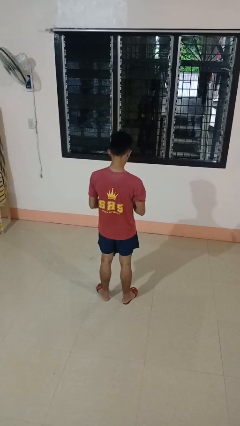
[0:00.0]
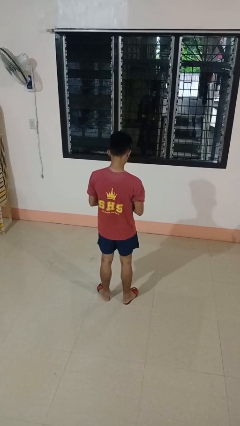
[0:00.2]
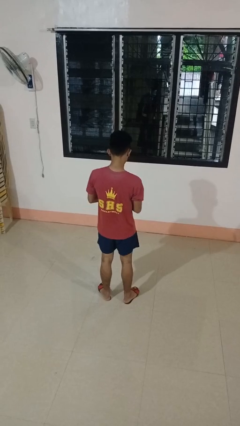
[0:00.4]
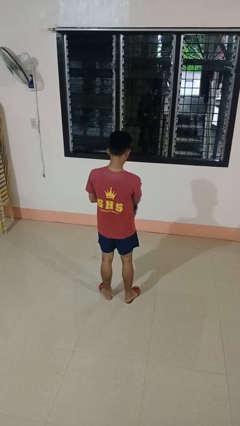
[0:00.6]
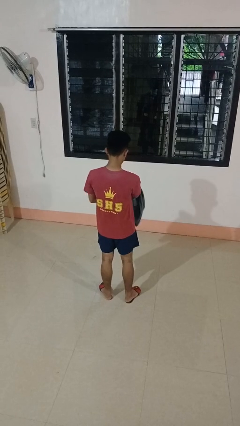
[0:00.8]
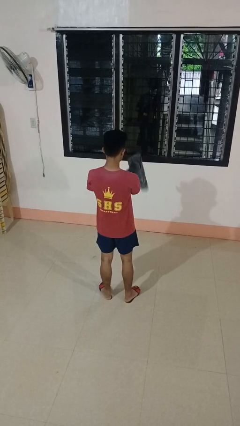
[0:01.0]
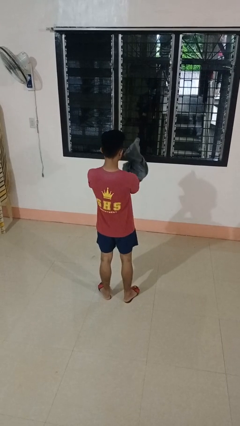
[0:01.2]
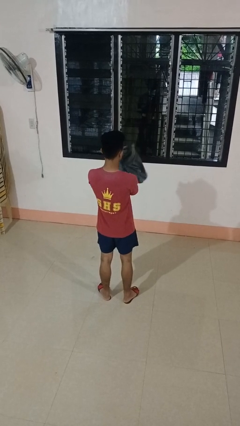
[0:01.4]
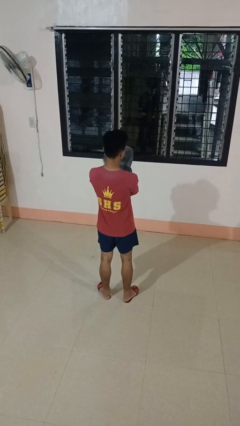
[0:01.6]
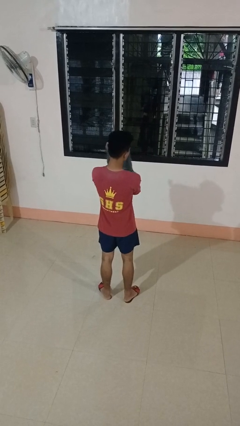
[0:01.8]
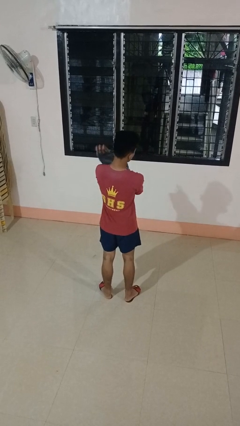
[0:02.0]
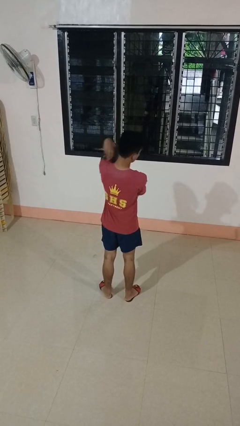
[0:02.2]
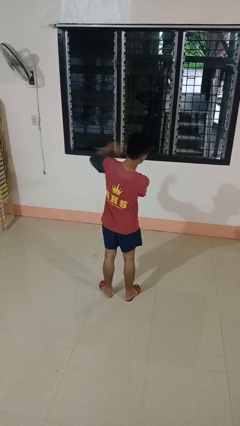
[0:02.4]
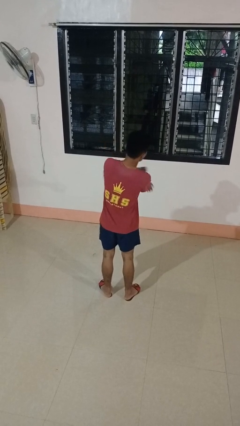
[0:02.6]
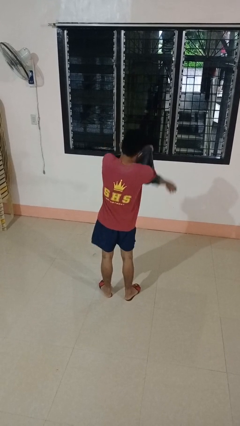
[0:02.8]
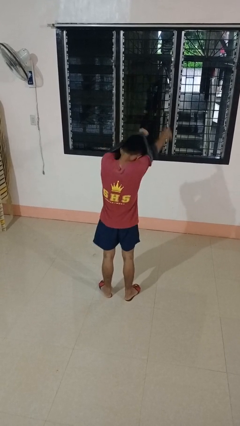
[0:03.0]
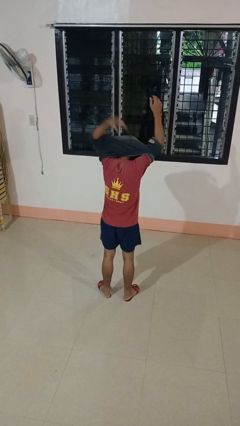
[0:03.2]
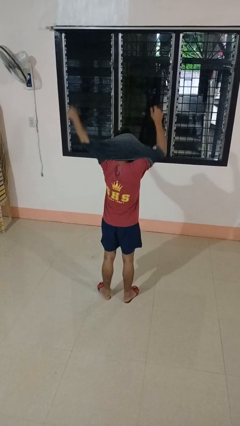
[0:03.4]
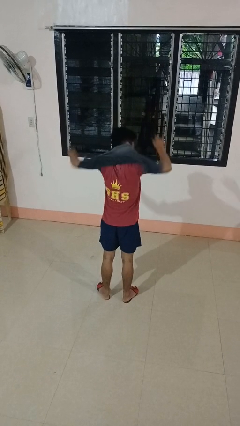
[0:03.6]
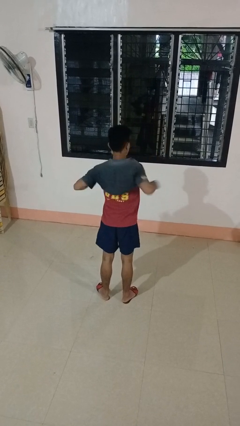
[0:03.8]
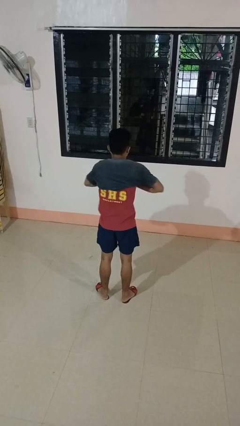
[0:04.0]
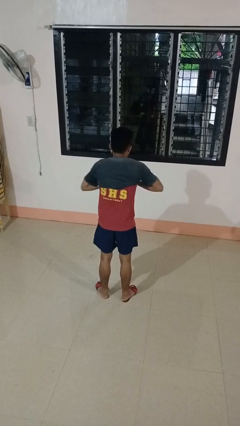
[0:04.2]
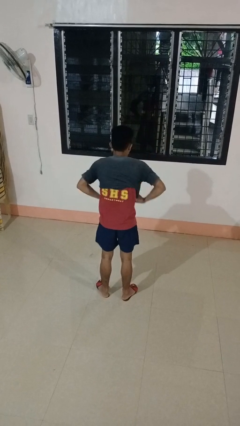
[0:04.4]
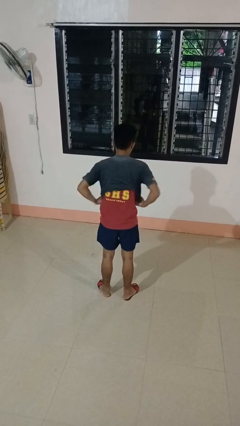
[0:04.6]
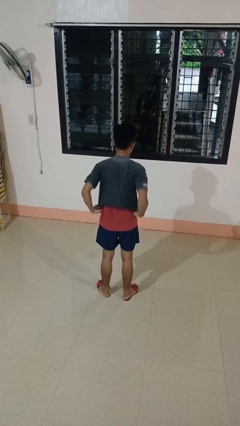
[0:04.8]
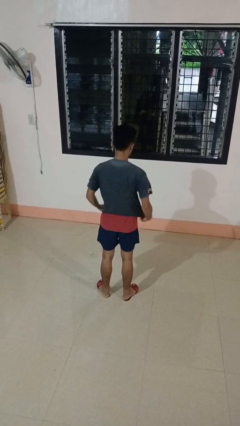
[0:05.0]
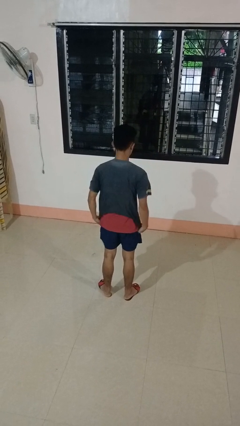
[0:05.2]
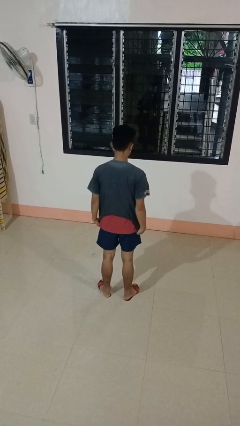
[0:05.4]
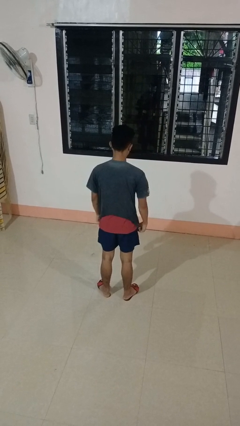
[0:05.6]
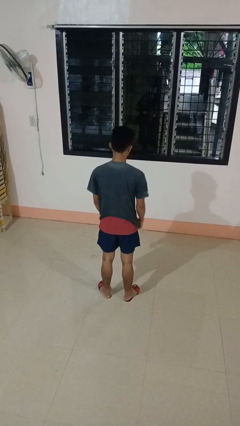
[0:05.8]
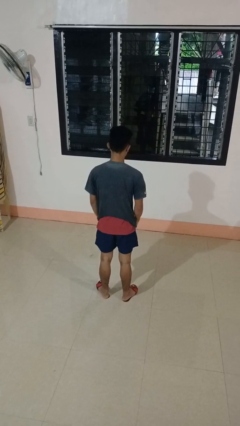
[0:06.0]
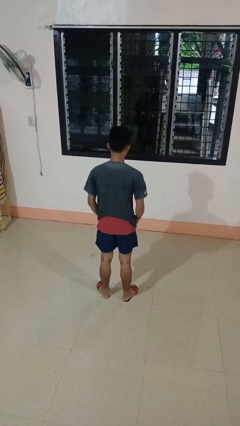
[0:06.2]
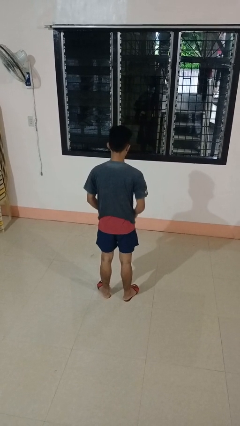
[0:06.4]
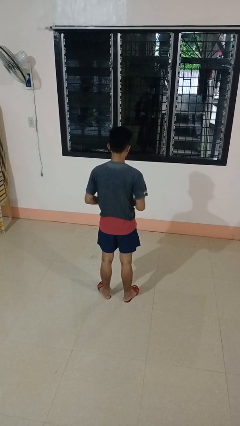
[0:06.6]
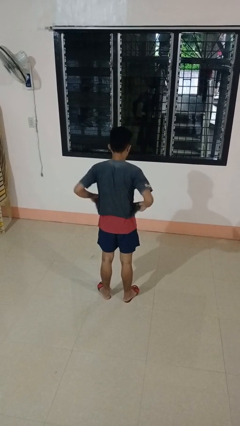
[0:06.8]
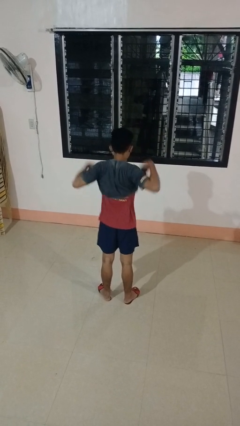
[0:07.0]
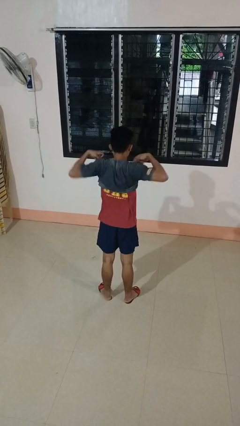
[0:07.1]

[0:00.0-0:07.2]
person puts on shirt

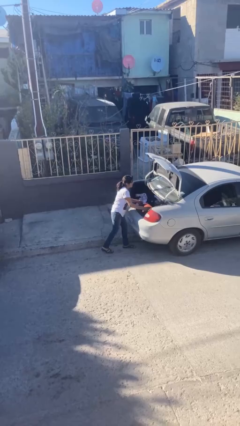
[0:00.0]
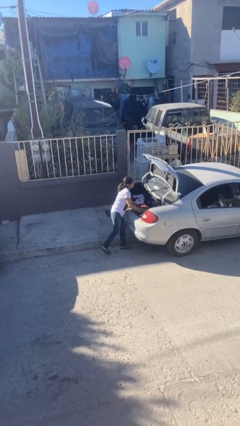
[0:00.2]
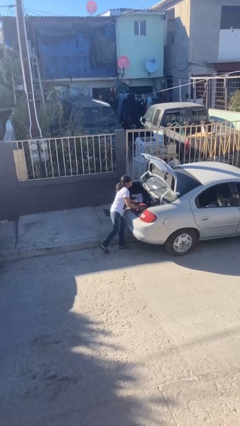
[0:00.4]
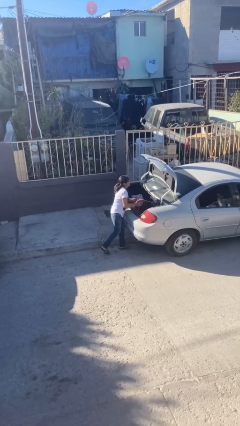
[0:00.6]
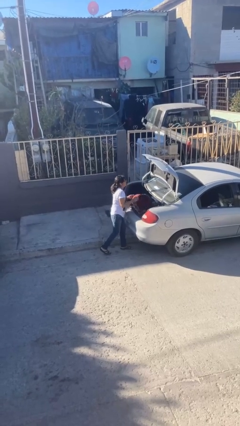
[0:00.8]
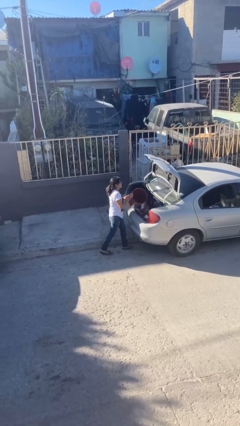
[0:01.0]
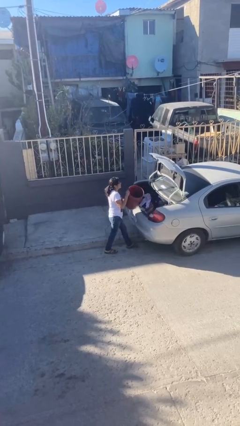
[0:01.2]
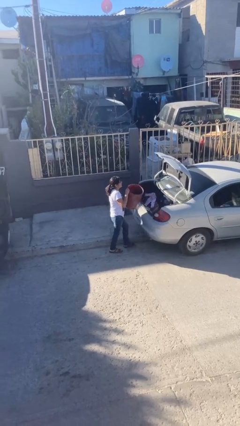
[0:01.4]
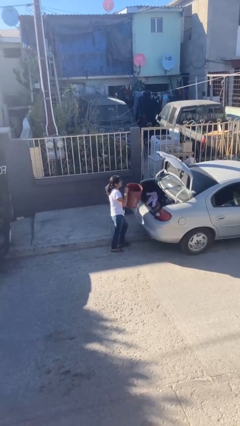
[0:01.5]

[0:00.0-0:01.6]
person unloads car

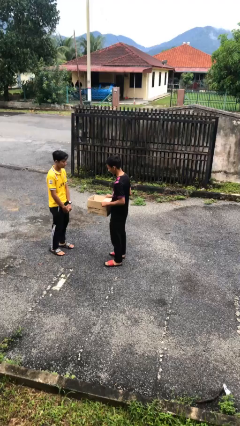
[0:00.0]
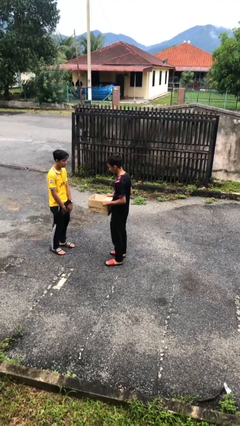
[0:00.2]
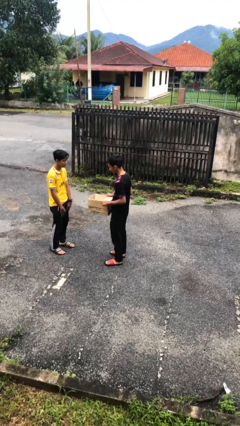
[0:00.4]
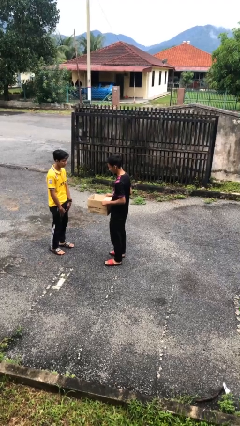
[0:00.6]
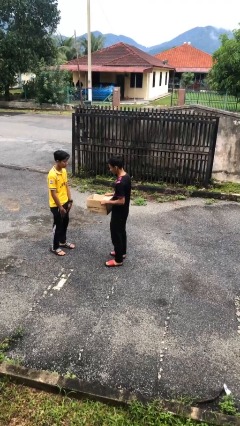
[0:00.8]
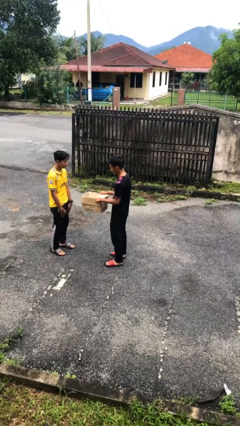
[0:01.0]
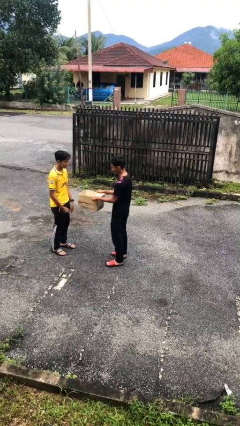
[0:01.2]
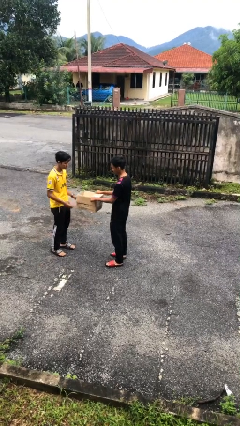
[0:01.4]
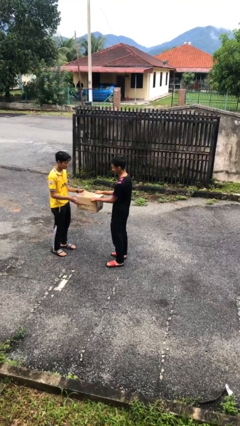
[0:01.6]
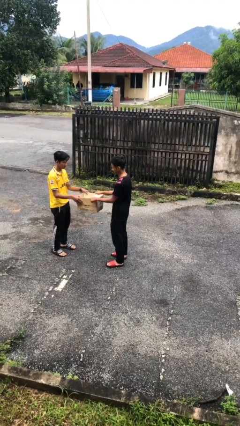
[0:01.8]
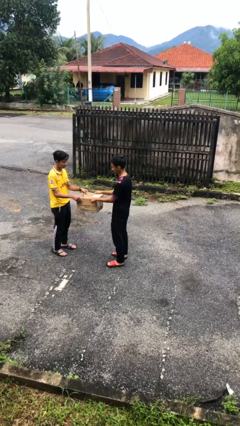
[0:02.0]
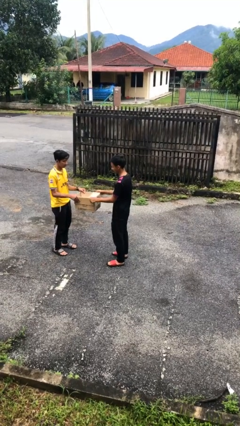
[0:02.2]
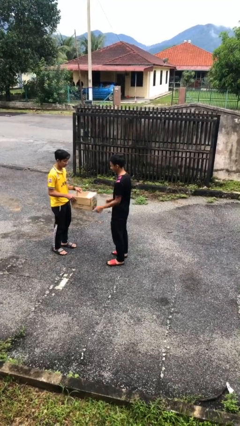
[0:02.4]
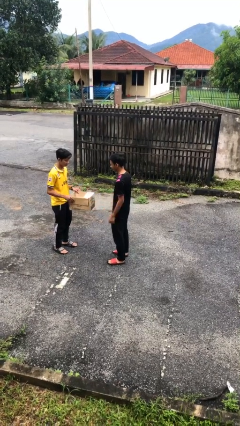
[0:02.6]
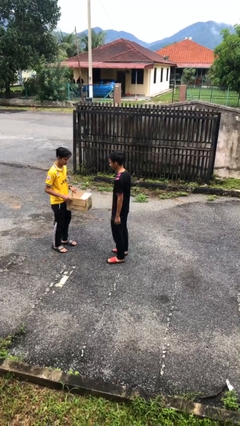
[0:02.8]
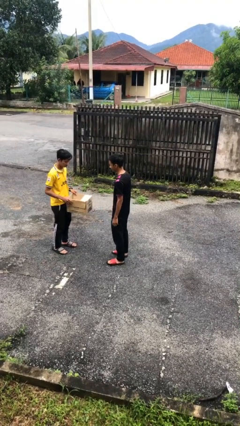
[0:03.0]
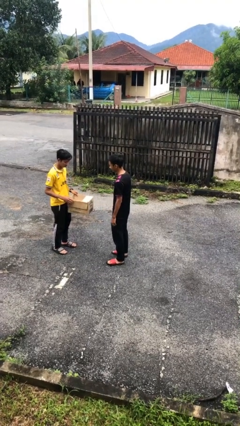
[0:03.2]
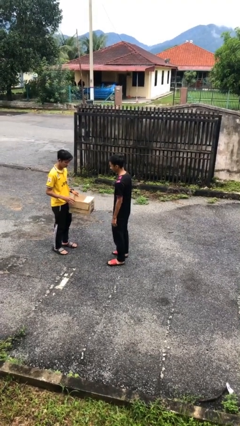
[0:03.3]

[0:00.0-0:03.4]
person transfers object to person

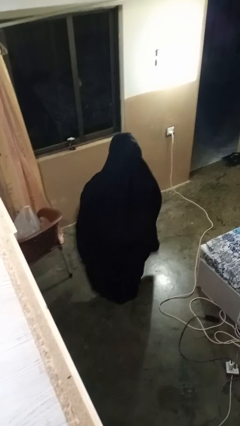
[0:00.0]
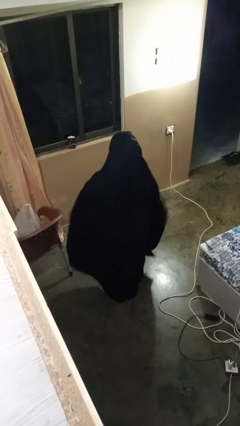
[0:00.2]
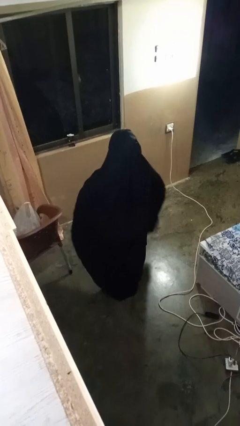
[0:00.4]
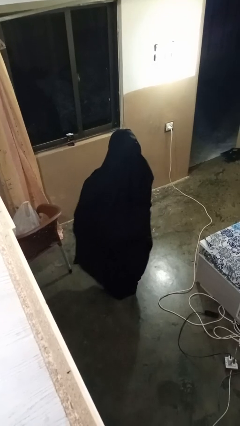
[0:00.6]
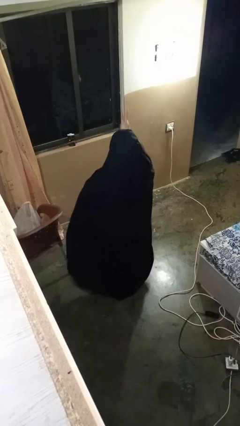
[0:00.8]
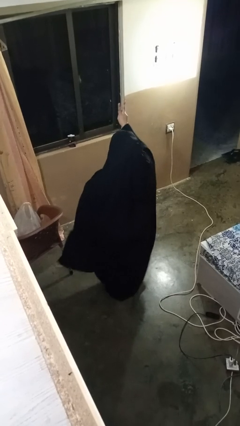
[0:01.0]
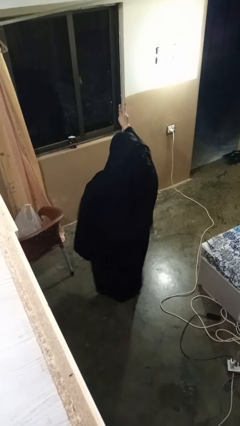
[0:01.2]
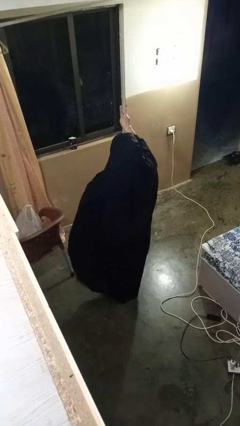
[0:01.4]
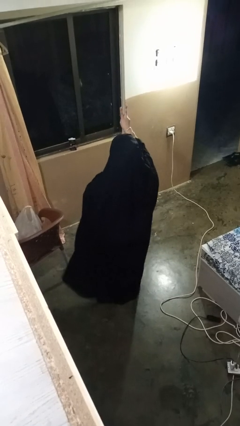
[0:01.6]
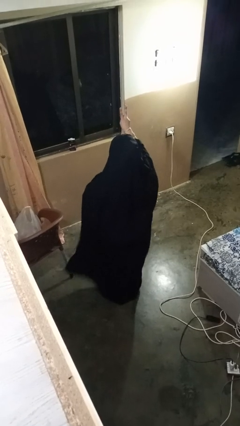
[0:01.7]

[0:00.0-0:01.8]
person gestures peace

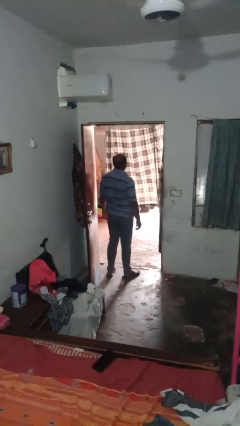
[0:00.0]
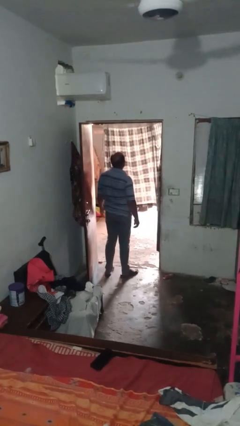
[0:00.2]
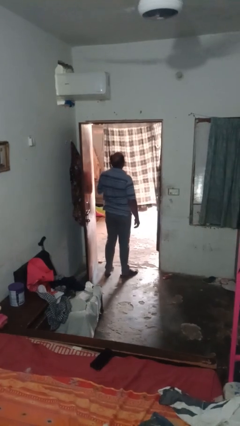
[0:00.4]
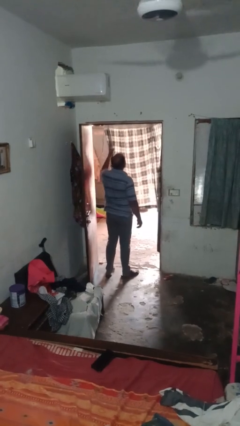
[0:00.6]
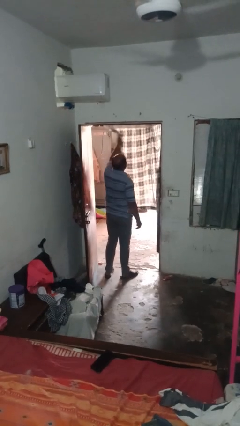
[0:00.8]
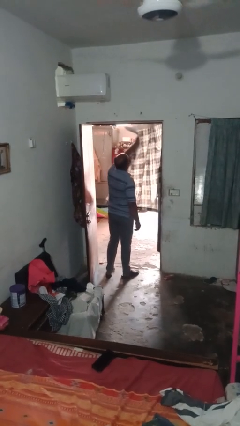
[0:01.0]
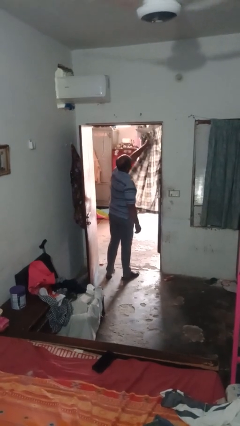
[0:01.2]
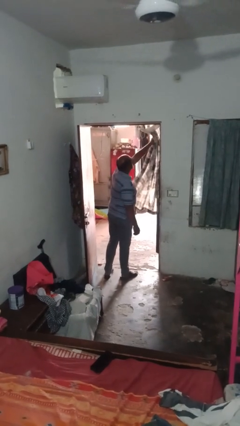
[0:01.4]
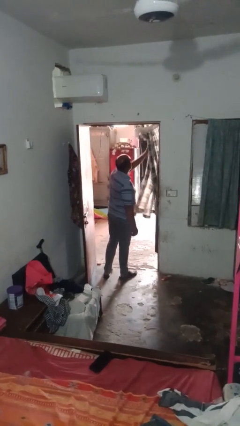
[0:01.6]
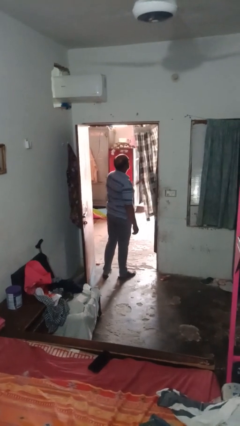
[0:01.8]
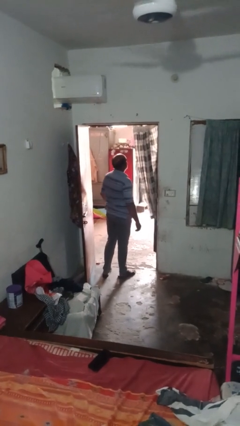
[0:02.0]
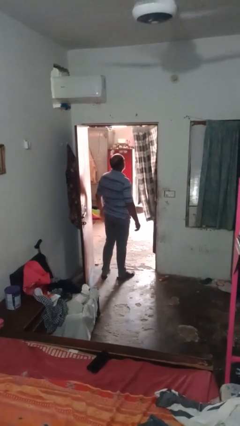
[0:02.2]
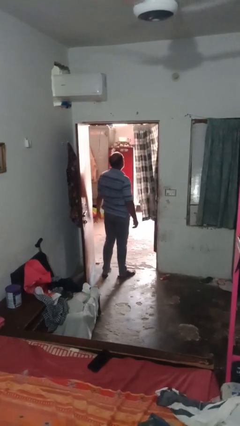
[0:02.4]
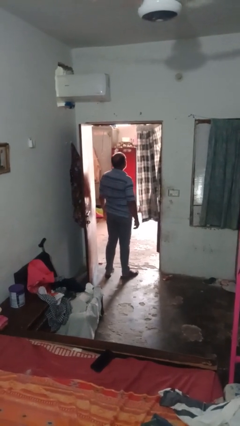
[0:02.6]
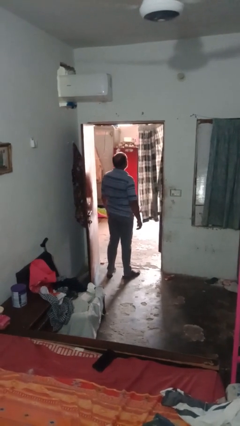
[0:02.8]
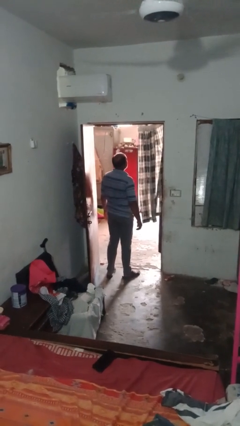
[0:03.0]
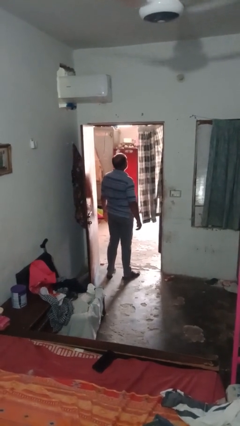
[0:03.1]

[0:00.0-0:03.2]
person opens curtains
